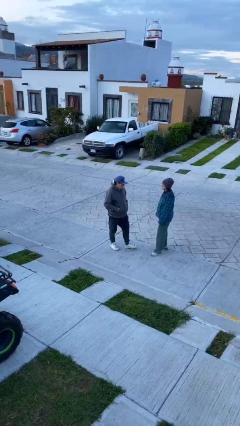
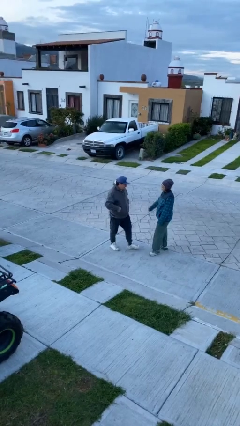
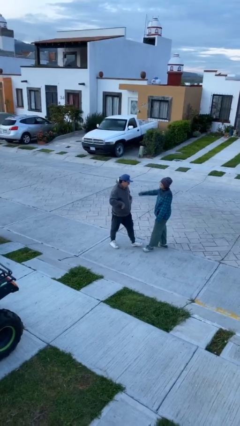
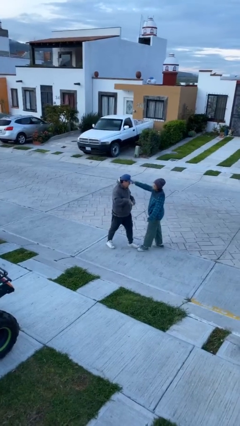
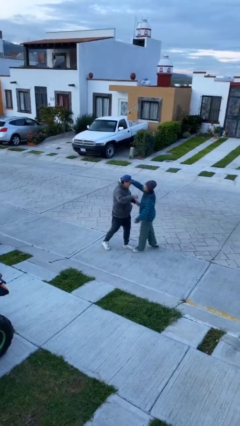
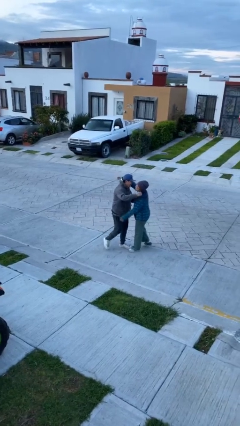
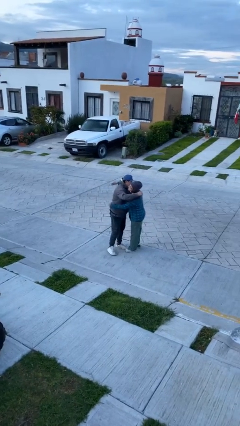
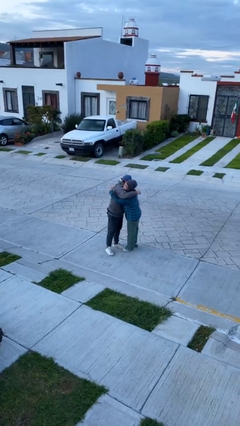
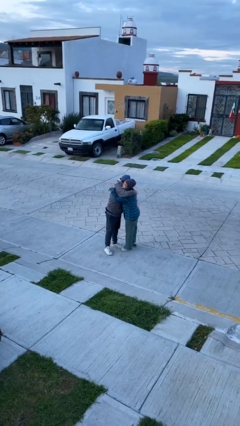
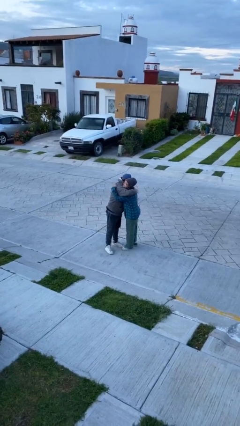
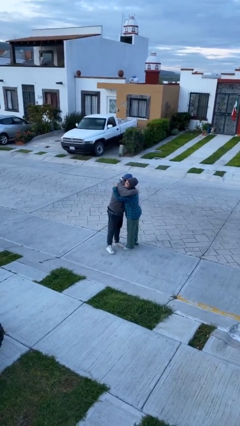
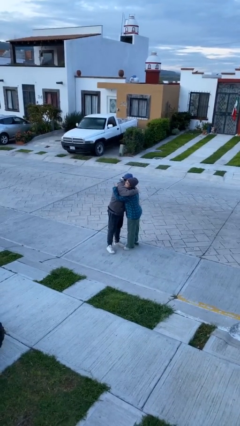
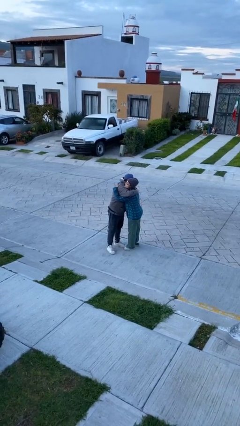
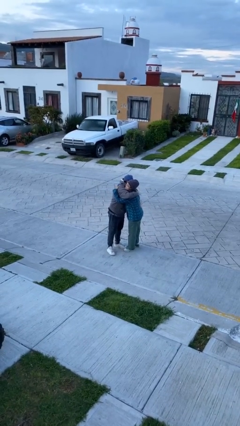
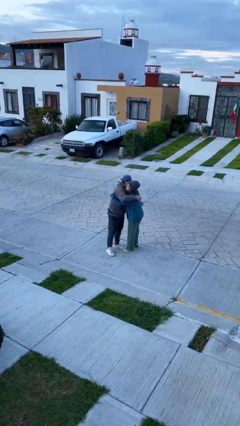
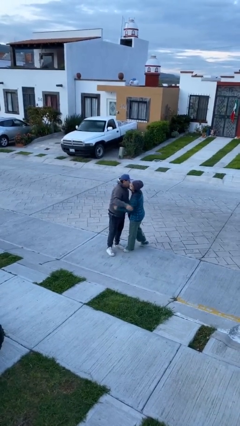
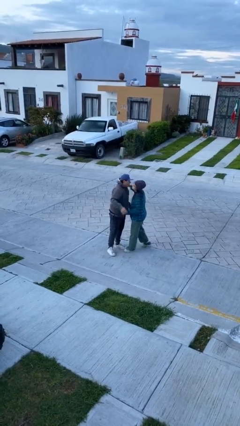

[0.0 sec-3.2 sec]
person embraces person

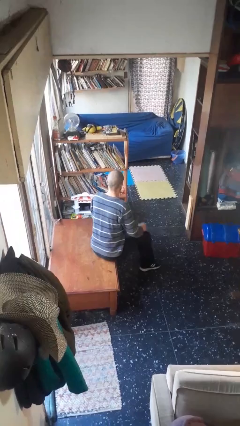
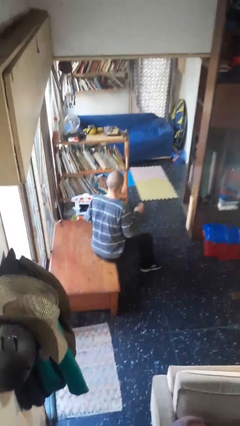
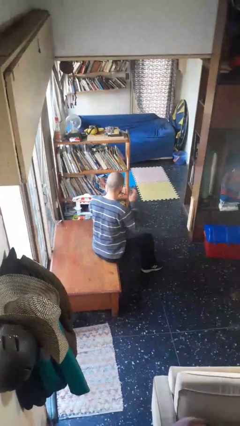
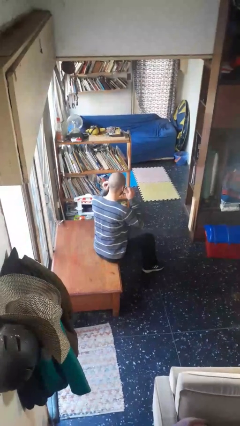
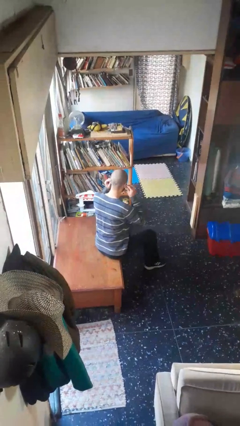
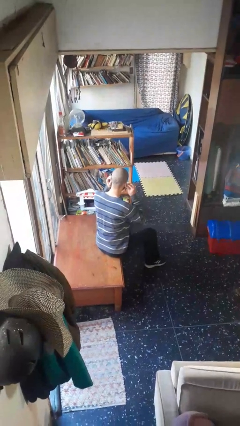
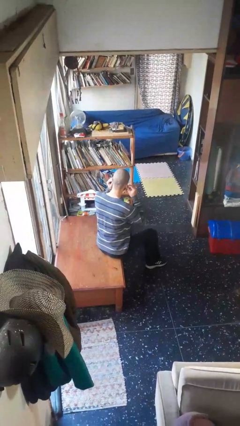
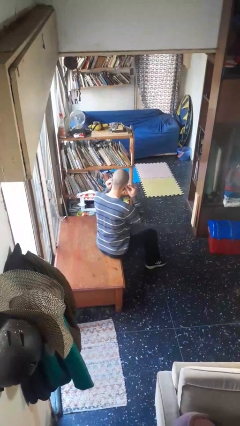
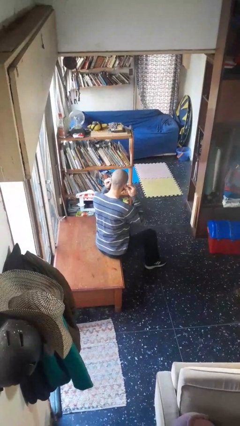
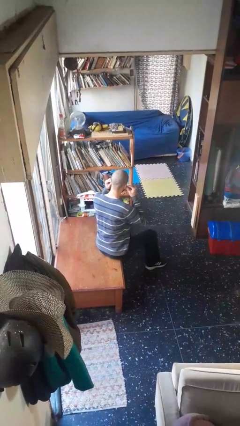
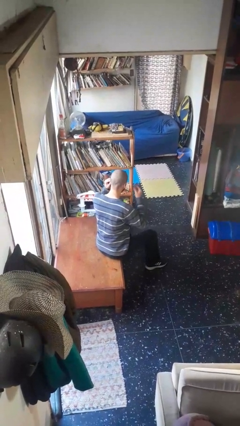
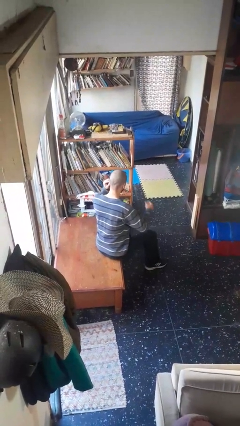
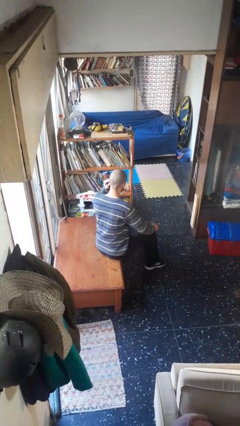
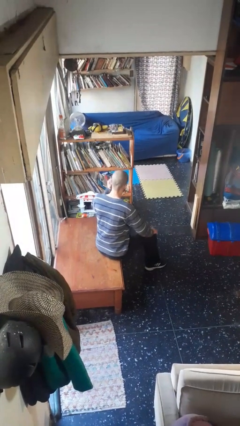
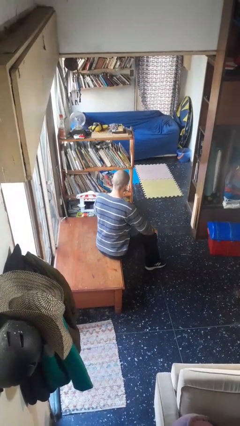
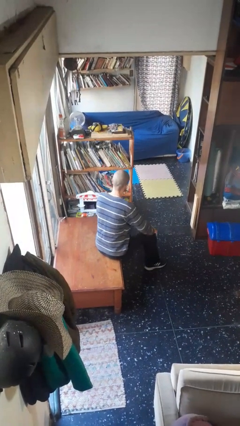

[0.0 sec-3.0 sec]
person puts on headphones

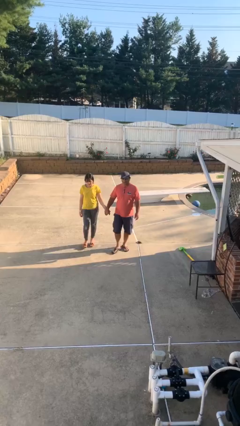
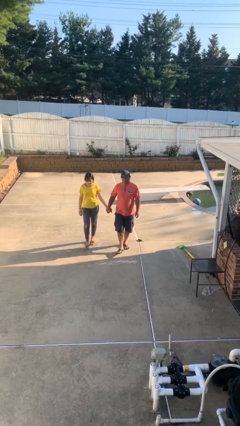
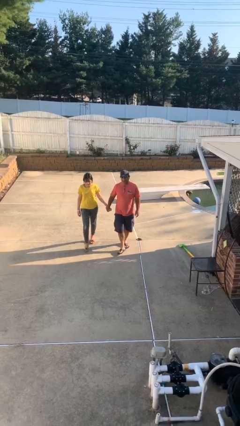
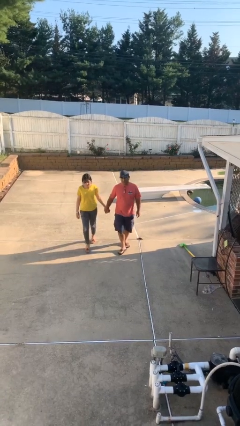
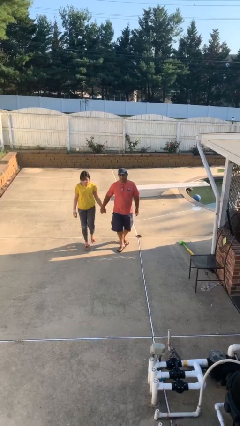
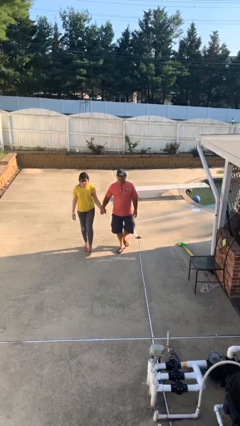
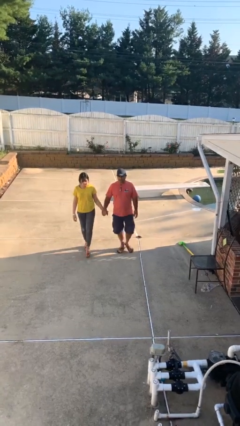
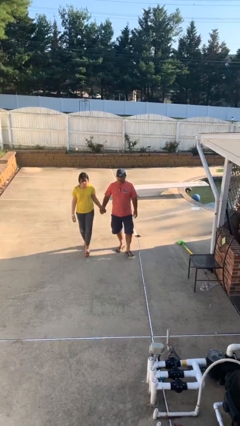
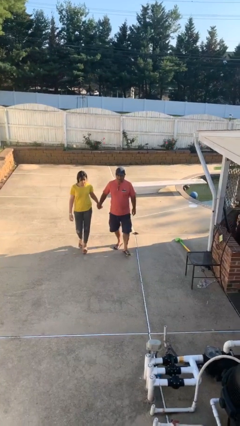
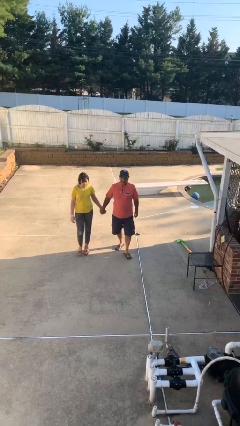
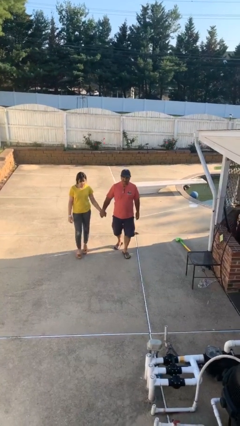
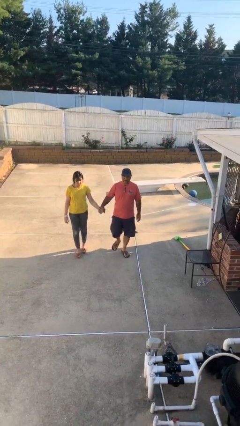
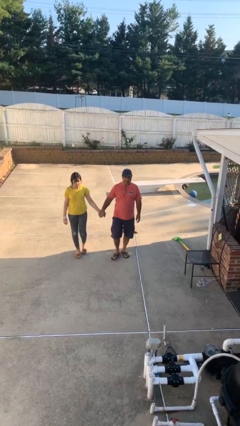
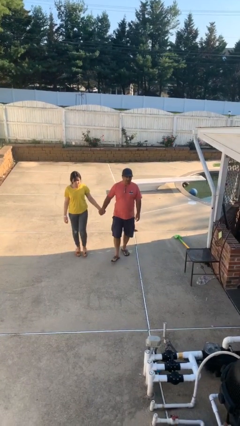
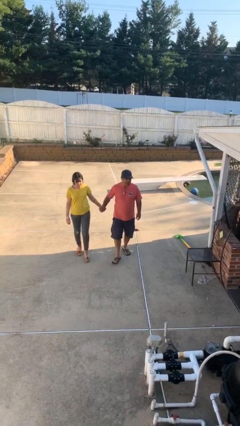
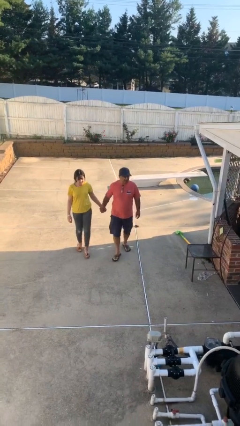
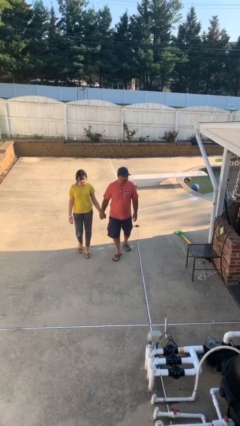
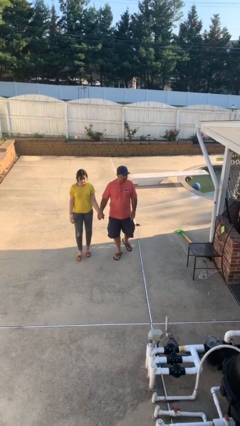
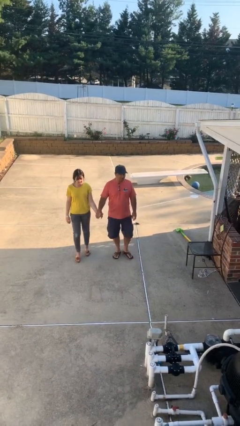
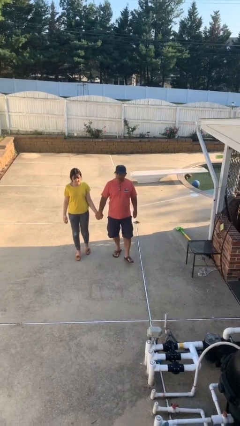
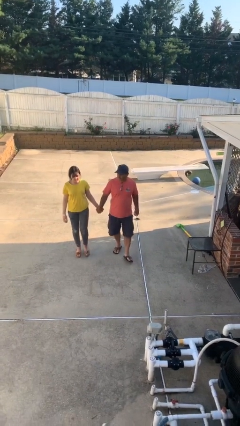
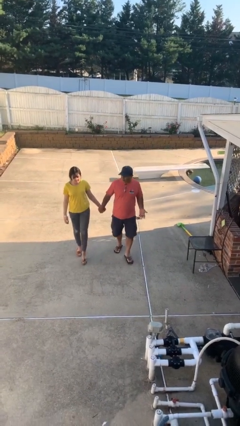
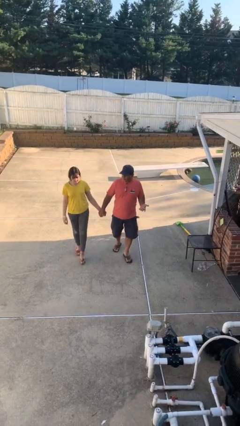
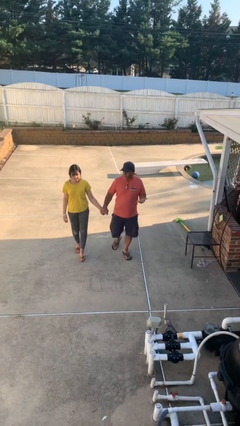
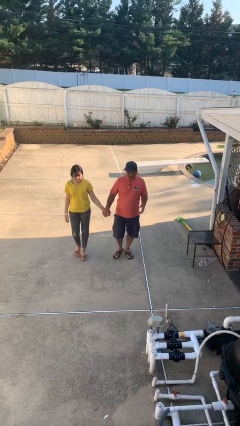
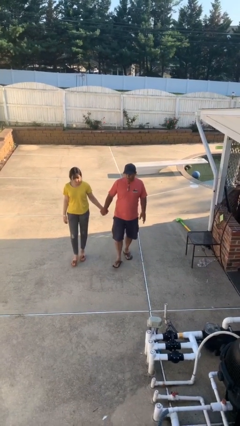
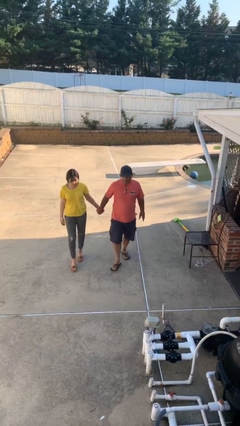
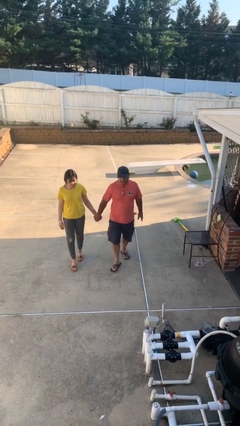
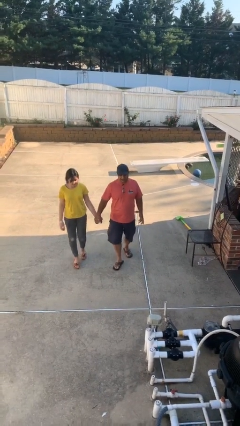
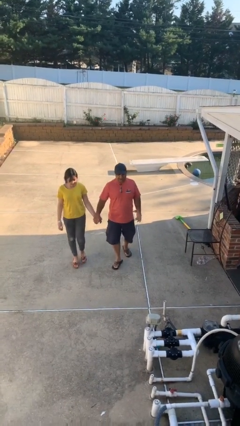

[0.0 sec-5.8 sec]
person holds hand

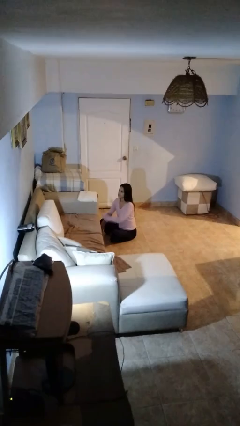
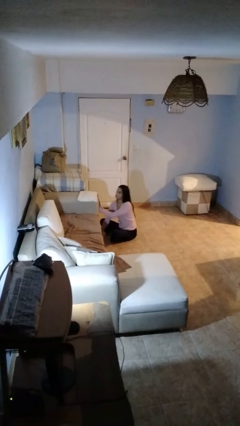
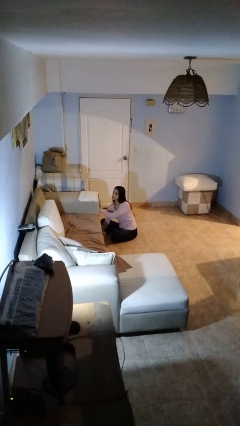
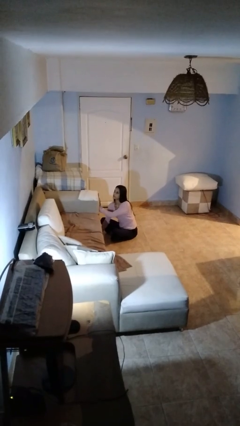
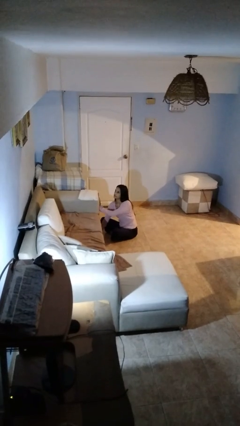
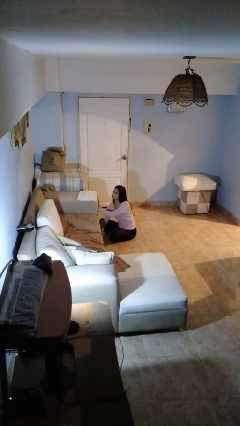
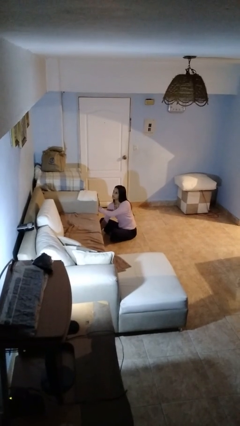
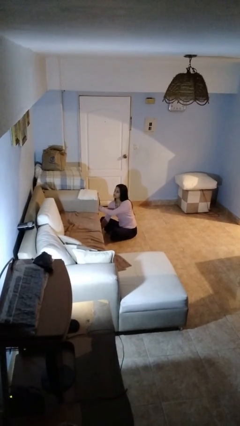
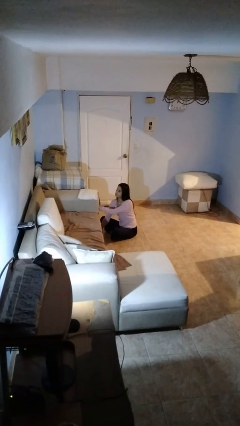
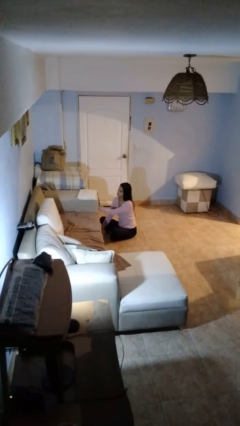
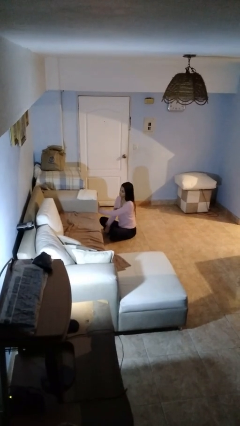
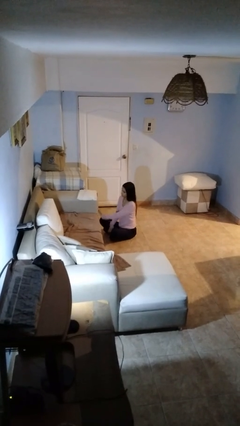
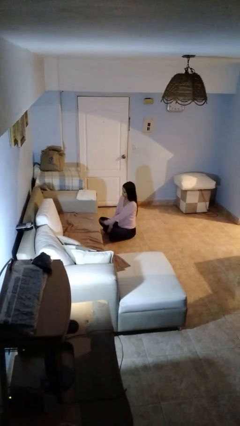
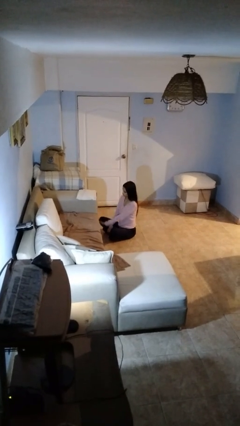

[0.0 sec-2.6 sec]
person searches under couch

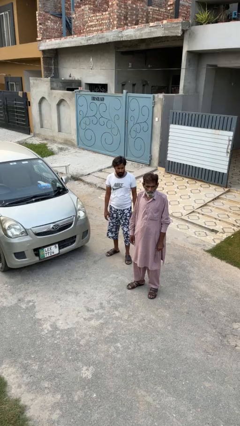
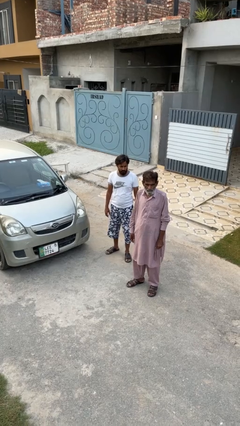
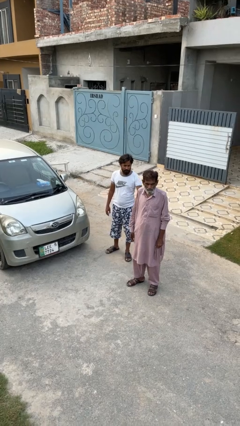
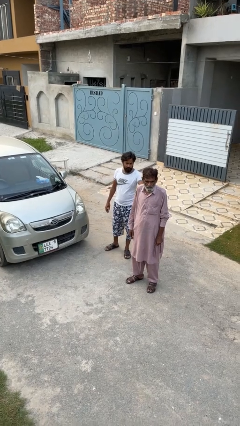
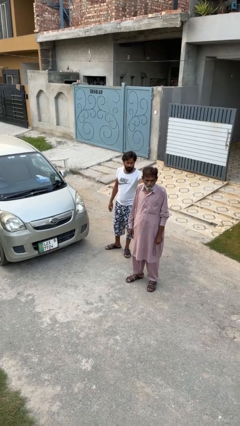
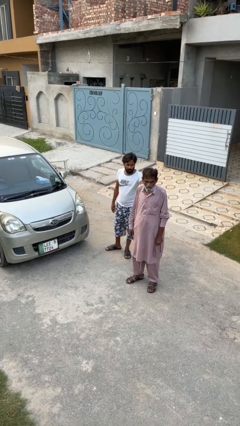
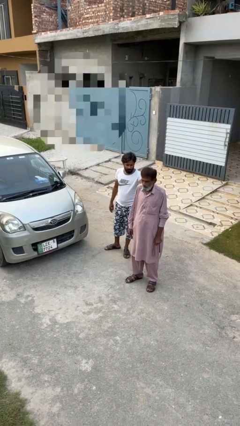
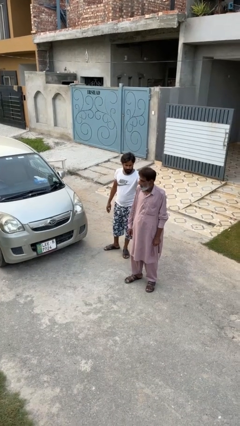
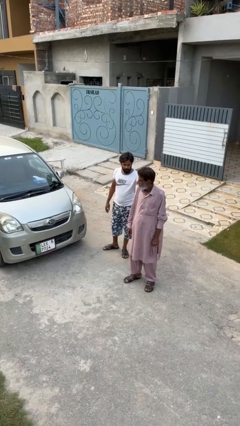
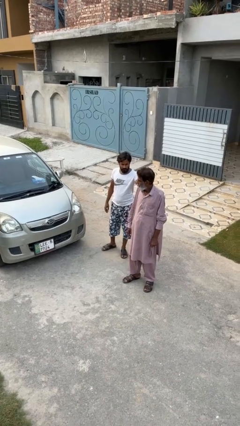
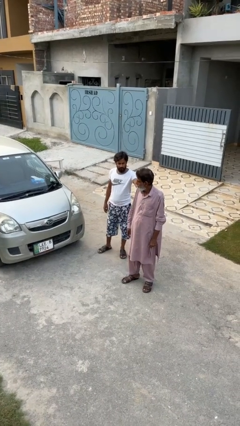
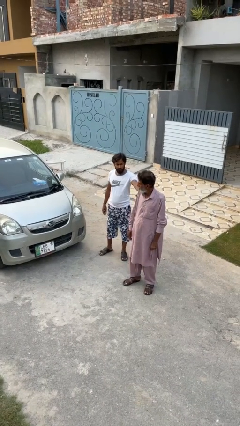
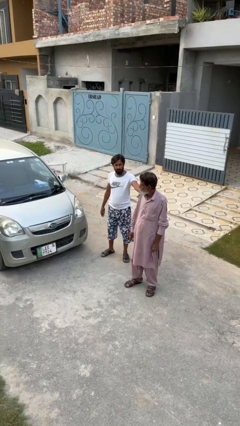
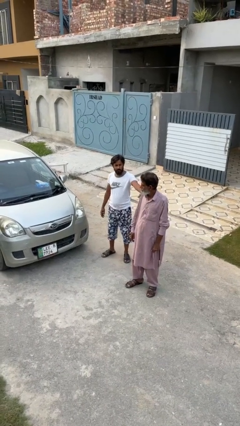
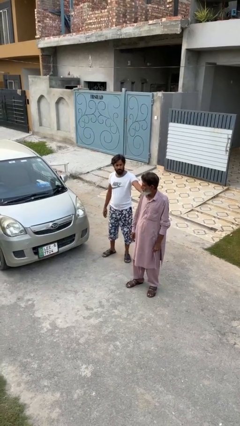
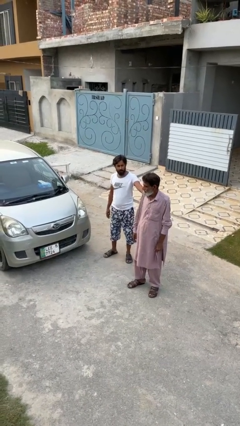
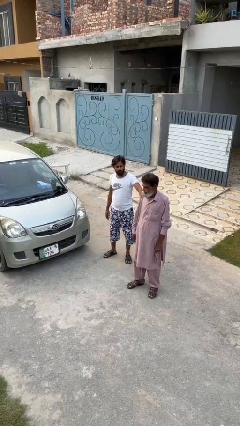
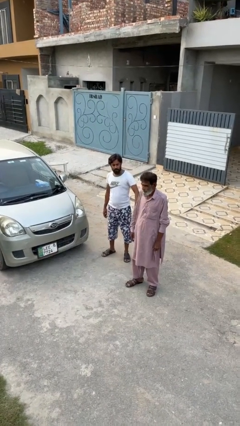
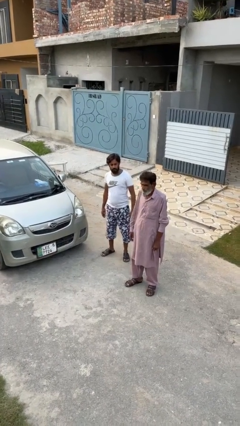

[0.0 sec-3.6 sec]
person touches back of person
